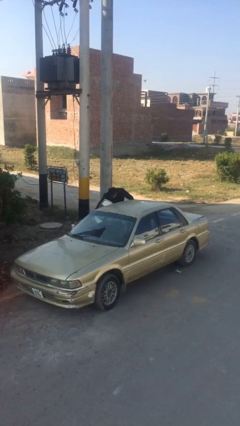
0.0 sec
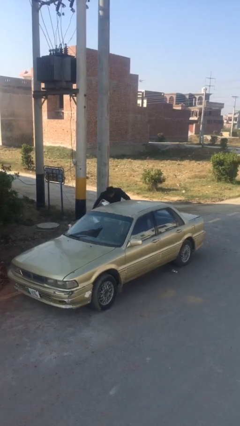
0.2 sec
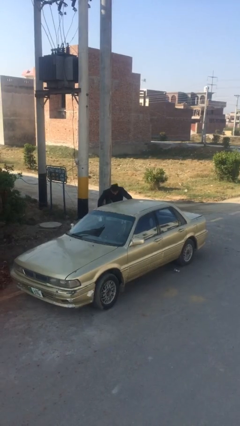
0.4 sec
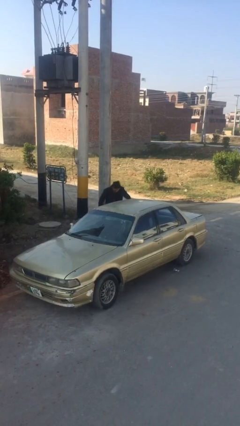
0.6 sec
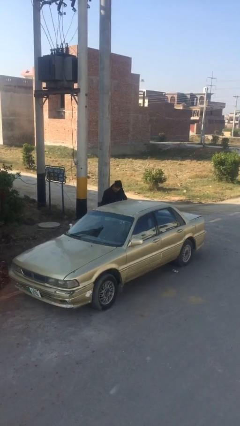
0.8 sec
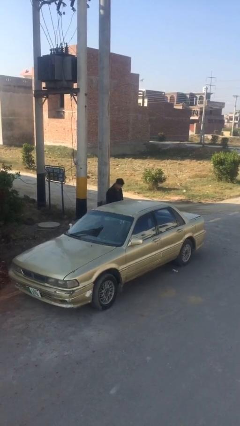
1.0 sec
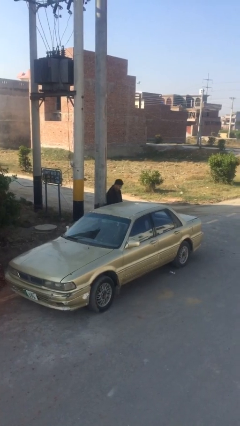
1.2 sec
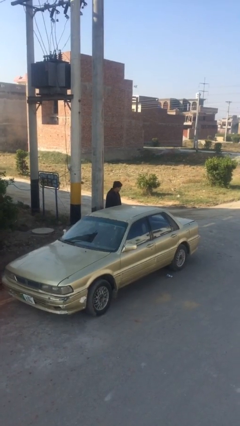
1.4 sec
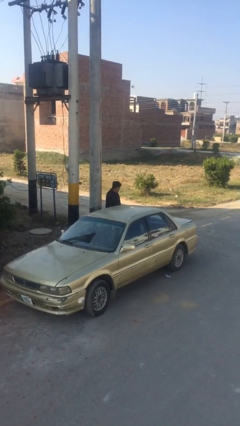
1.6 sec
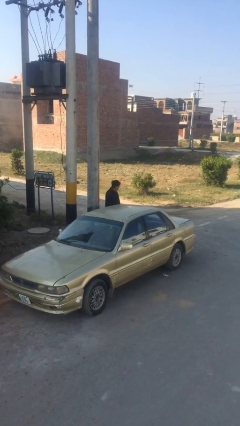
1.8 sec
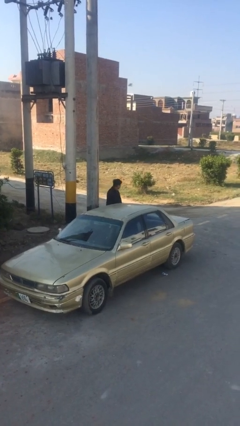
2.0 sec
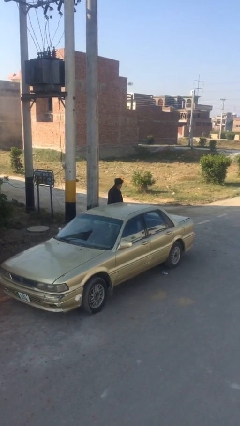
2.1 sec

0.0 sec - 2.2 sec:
person closes car door

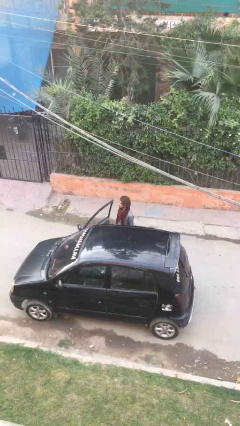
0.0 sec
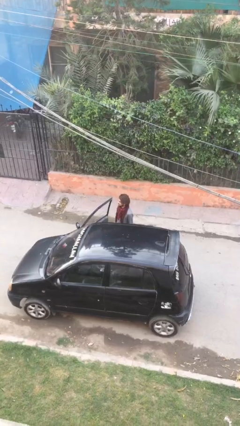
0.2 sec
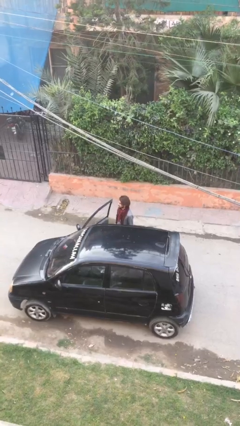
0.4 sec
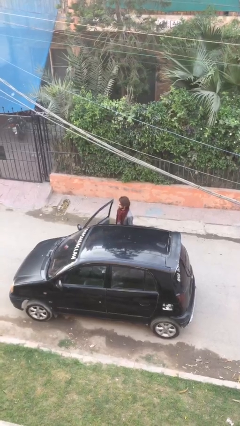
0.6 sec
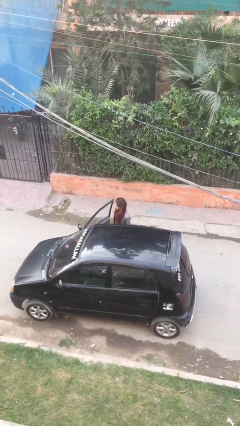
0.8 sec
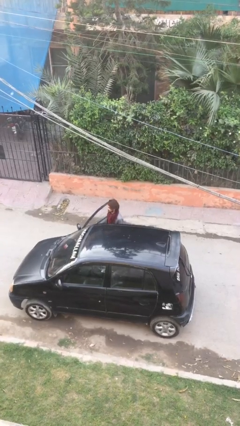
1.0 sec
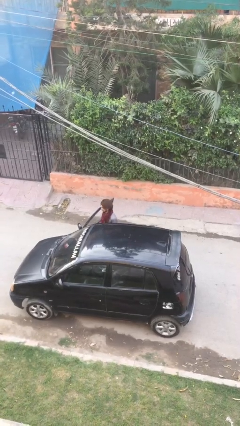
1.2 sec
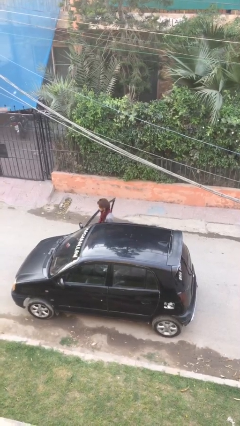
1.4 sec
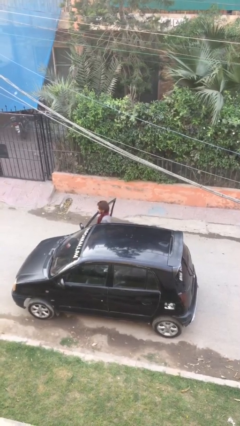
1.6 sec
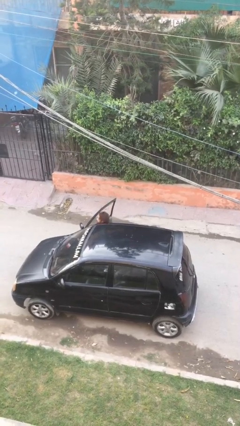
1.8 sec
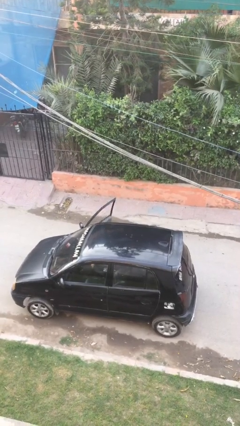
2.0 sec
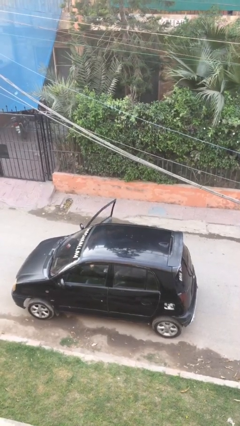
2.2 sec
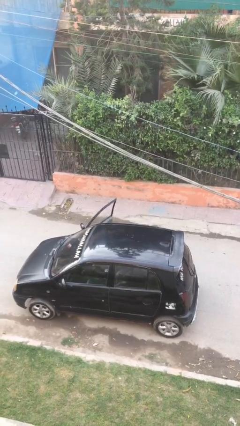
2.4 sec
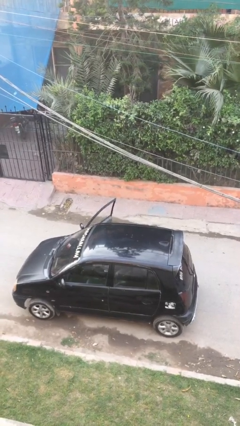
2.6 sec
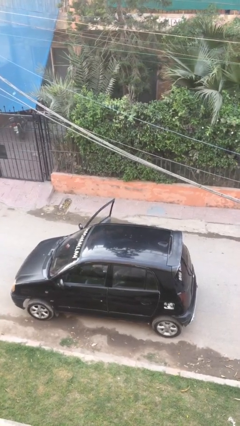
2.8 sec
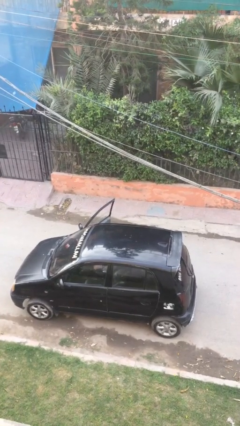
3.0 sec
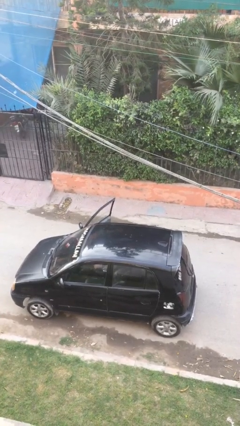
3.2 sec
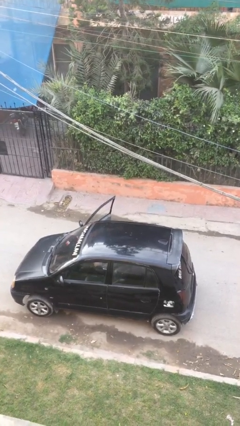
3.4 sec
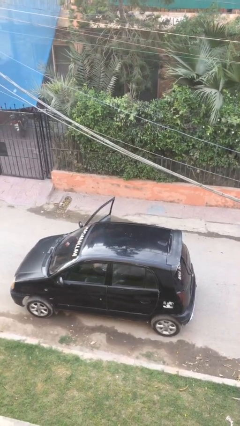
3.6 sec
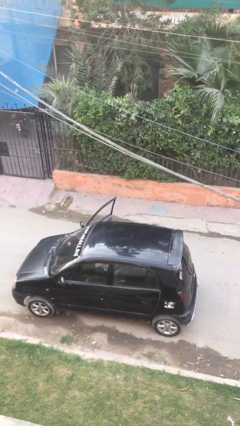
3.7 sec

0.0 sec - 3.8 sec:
person enters car

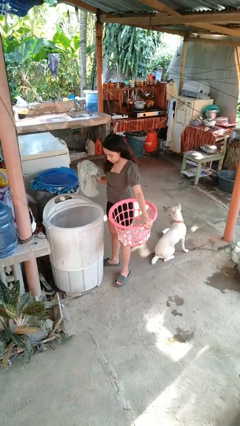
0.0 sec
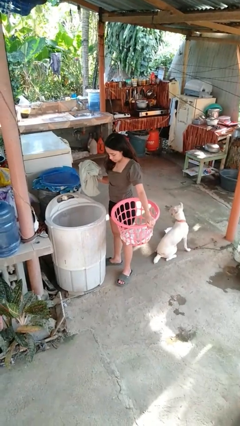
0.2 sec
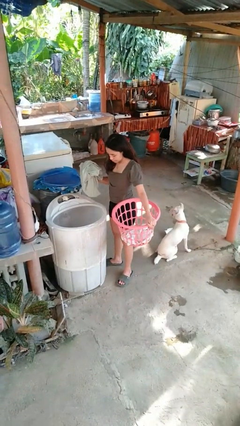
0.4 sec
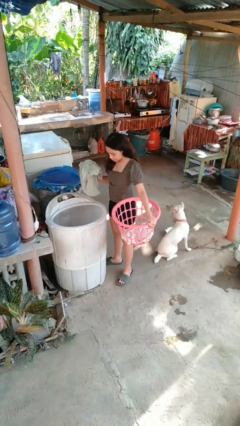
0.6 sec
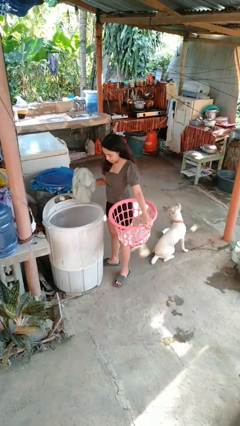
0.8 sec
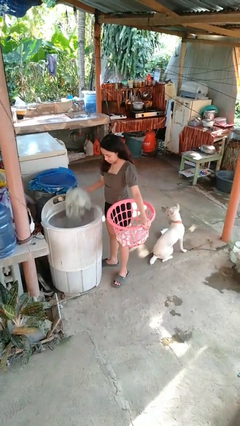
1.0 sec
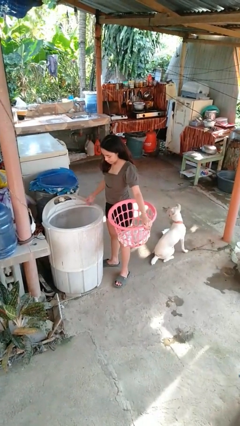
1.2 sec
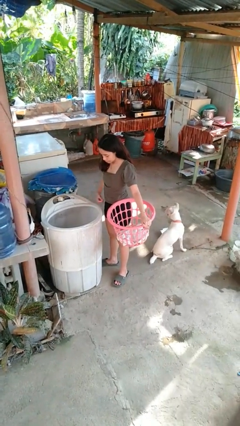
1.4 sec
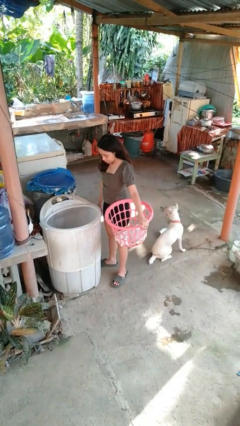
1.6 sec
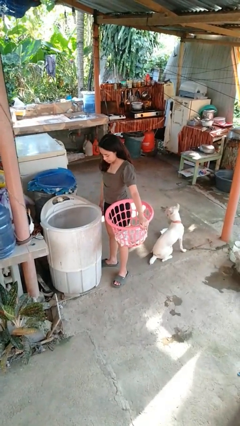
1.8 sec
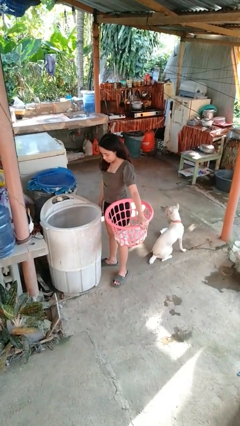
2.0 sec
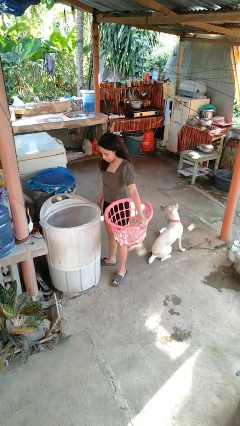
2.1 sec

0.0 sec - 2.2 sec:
person loads dryer

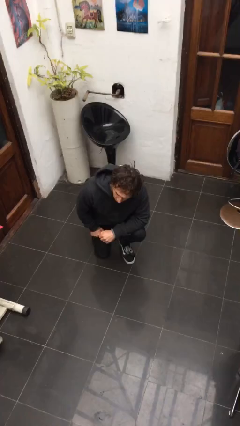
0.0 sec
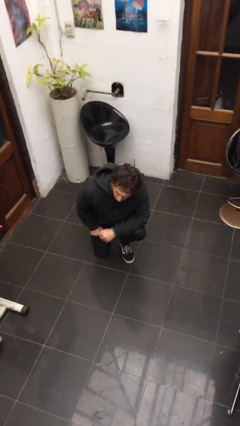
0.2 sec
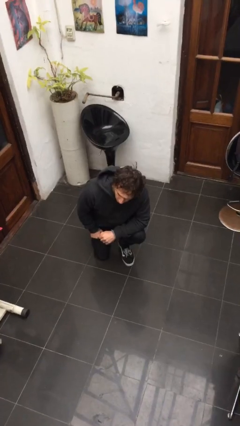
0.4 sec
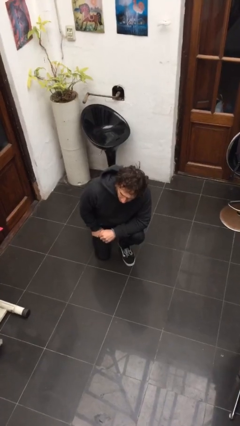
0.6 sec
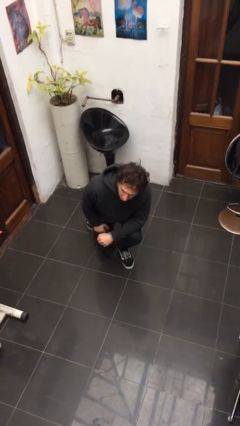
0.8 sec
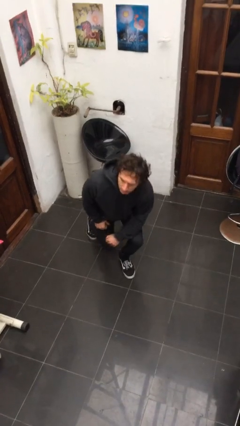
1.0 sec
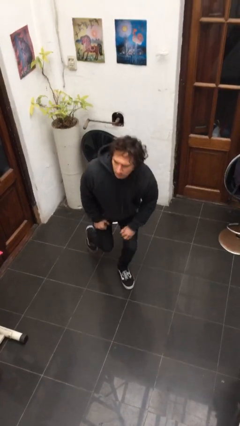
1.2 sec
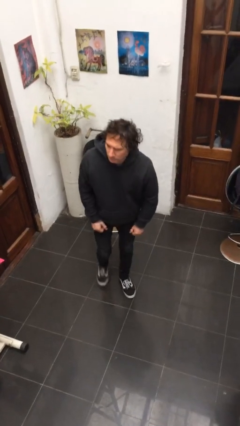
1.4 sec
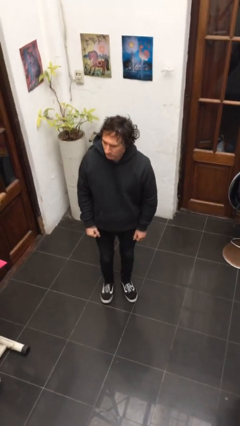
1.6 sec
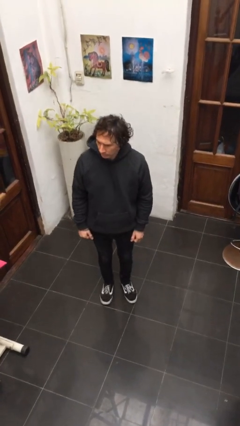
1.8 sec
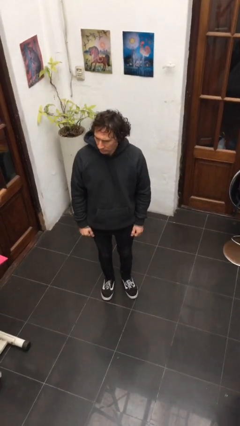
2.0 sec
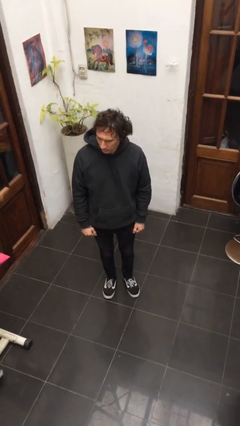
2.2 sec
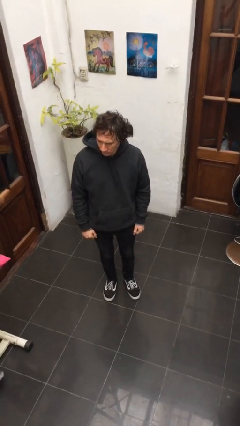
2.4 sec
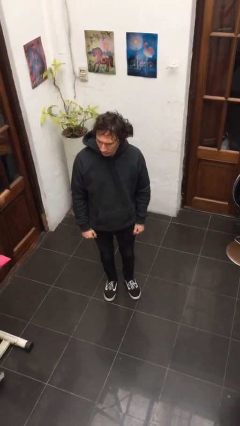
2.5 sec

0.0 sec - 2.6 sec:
person stands up from floor

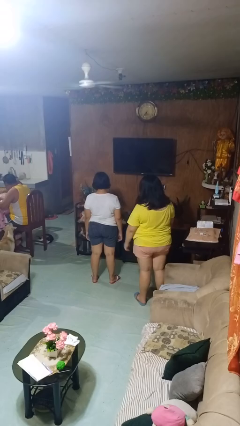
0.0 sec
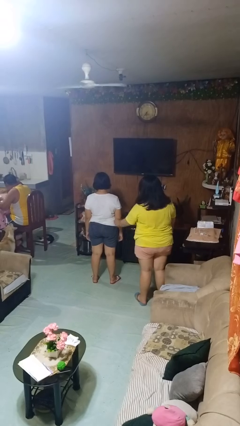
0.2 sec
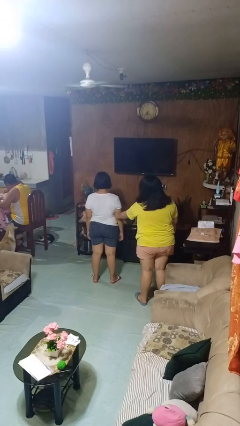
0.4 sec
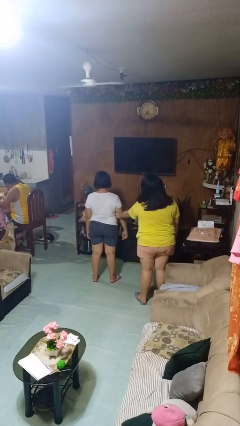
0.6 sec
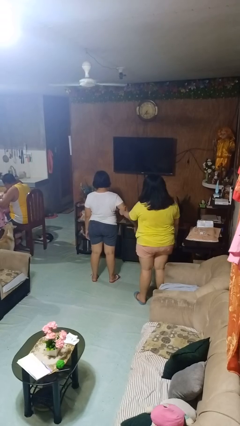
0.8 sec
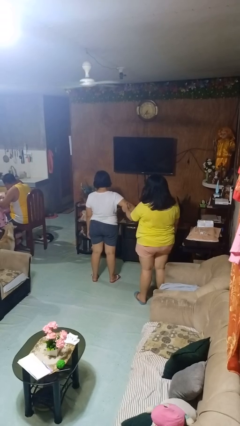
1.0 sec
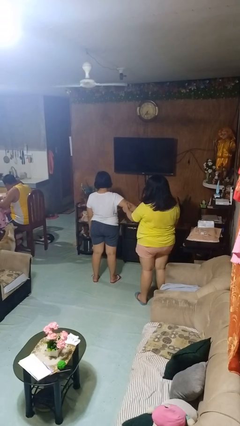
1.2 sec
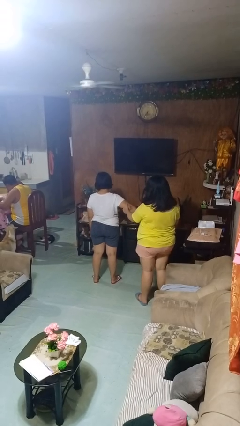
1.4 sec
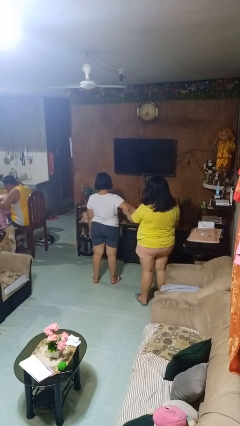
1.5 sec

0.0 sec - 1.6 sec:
person grabs person by bicep

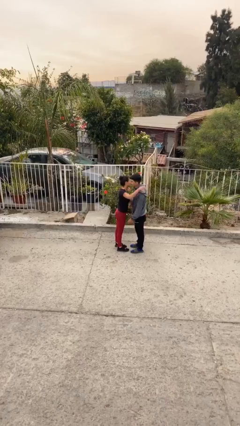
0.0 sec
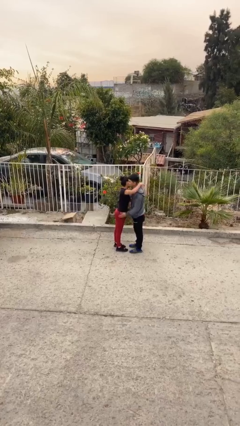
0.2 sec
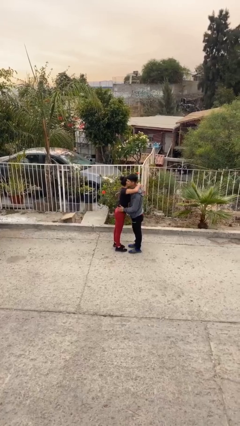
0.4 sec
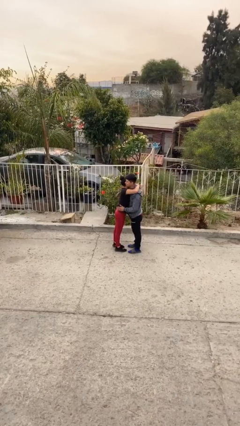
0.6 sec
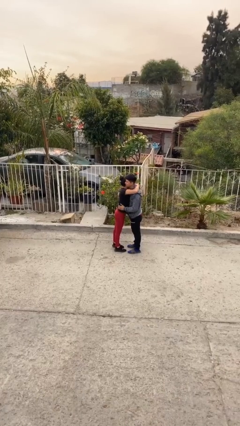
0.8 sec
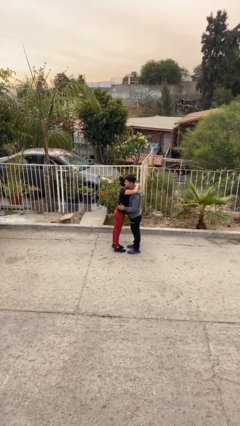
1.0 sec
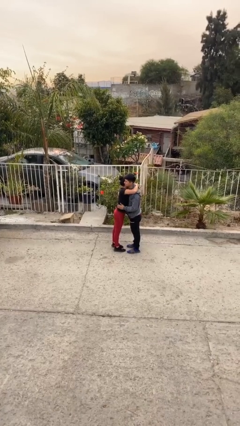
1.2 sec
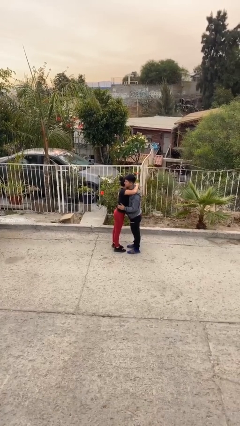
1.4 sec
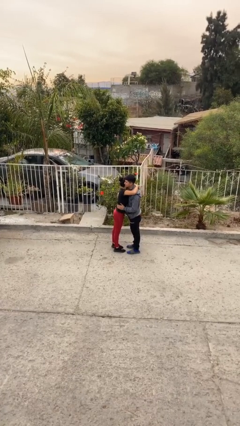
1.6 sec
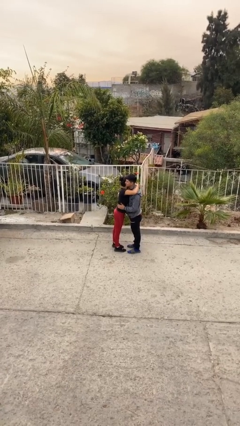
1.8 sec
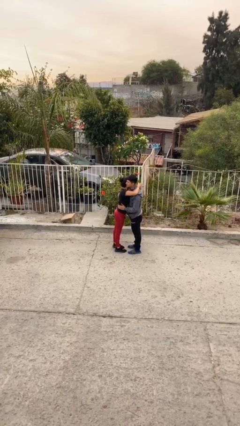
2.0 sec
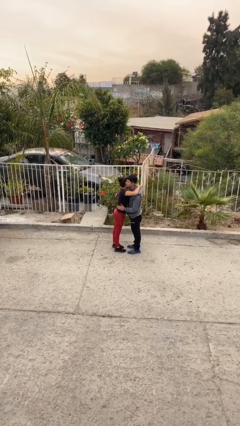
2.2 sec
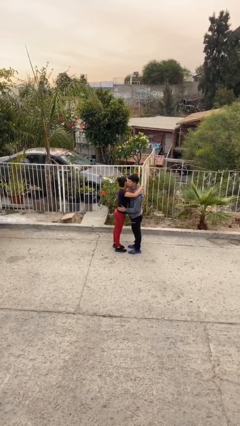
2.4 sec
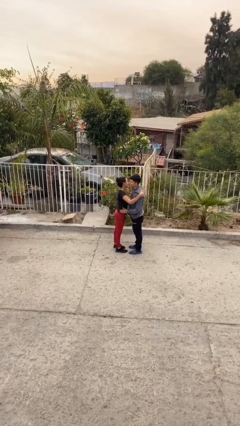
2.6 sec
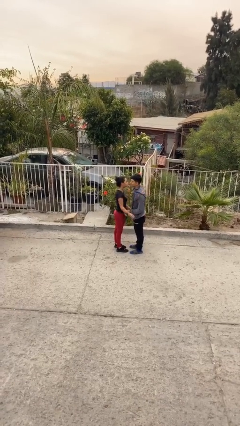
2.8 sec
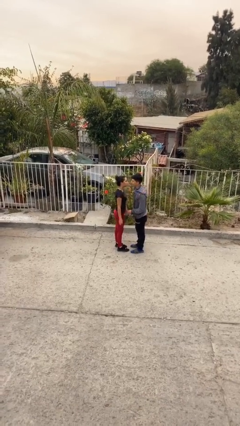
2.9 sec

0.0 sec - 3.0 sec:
person embraces person

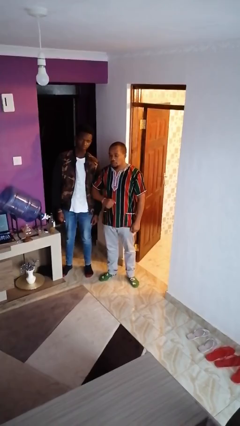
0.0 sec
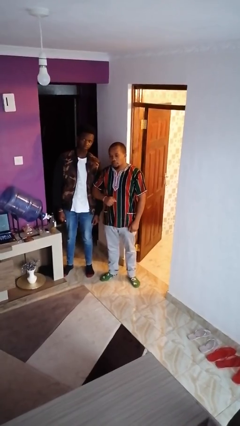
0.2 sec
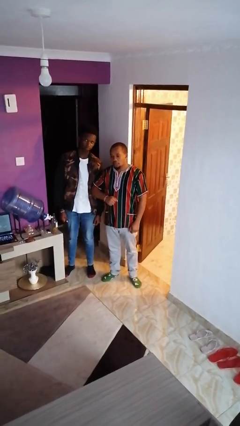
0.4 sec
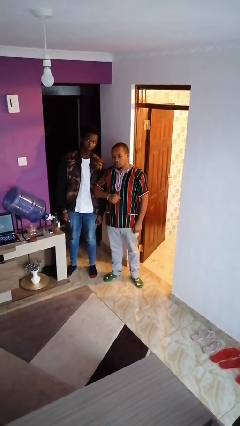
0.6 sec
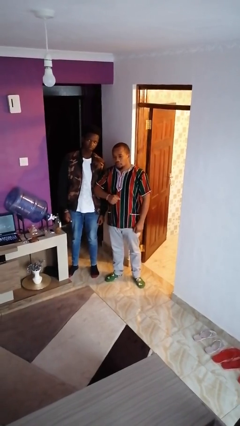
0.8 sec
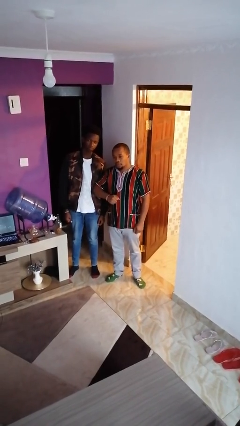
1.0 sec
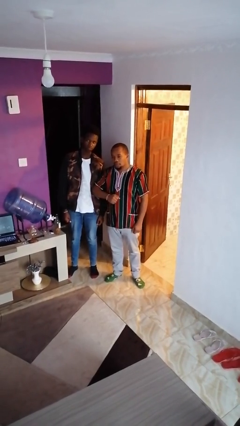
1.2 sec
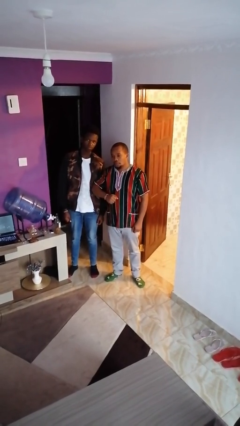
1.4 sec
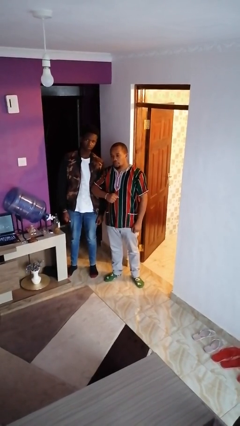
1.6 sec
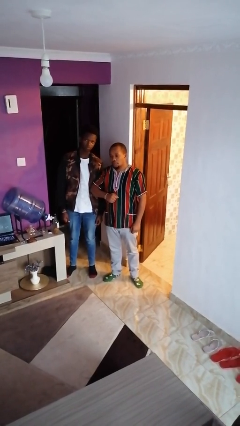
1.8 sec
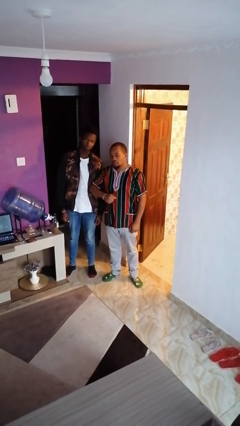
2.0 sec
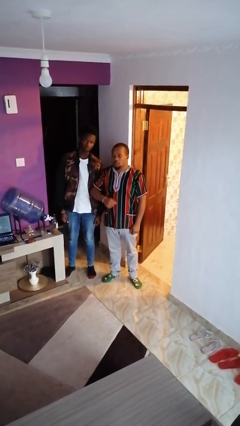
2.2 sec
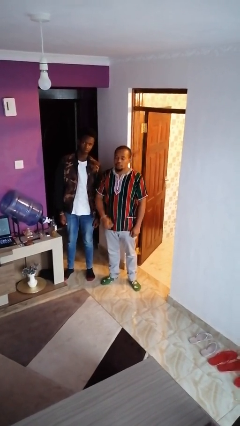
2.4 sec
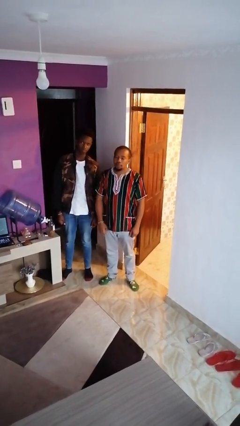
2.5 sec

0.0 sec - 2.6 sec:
person nudges person with elbow
